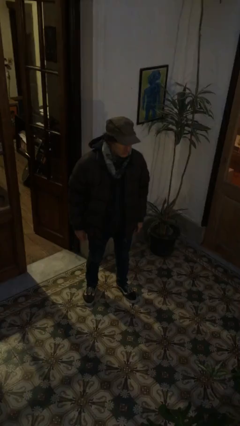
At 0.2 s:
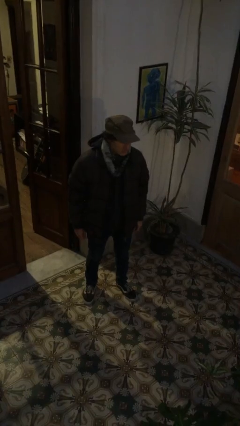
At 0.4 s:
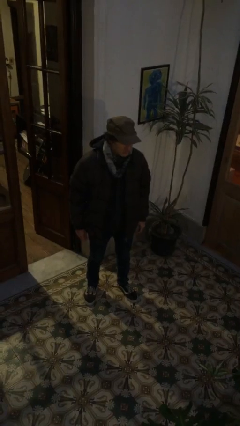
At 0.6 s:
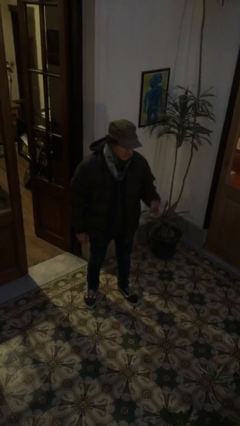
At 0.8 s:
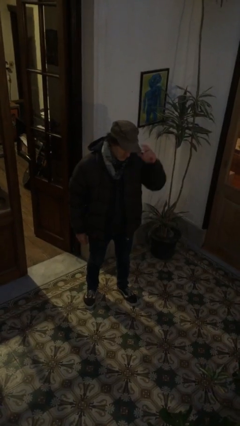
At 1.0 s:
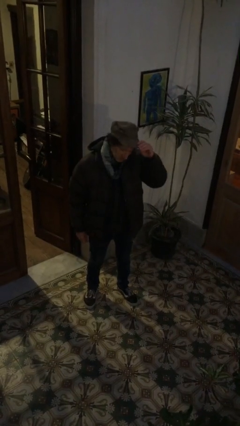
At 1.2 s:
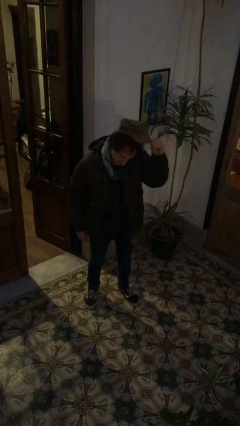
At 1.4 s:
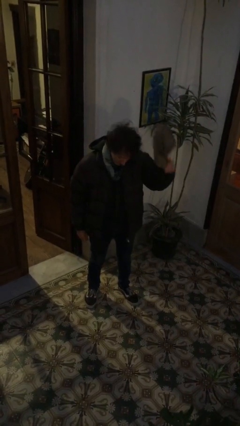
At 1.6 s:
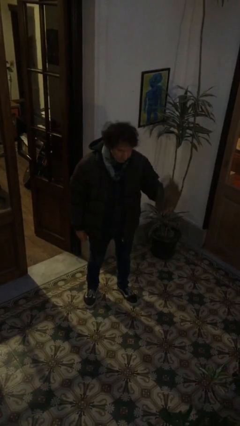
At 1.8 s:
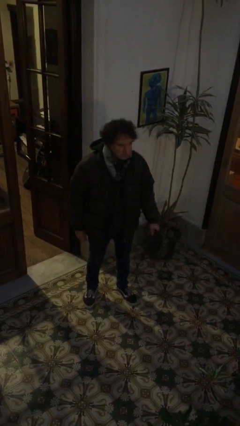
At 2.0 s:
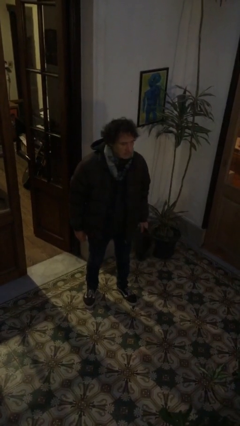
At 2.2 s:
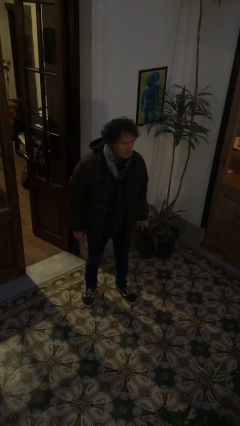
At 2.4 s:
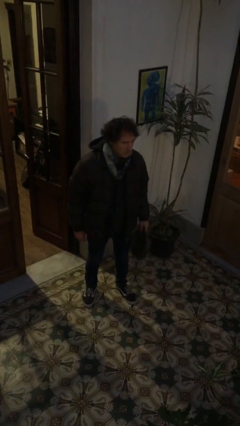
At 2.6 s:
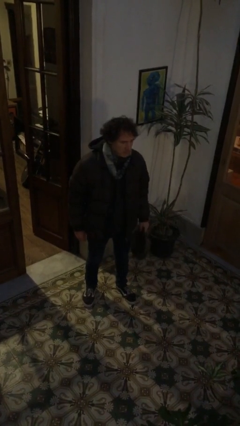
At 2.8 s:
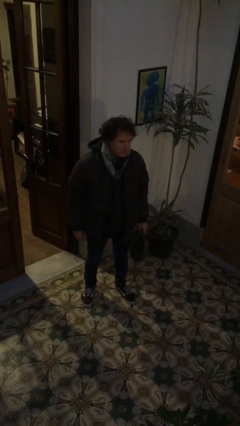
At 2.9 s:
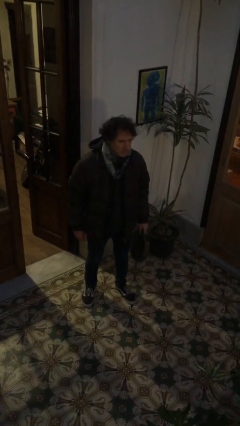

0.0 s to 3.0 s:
person takes off hat

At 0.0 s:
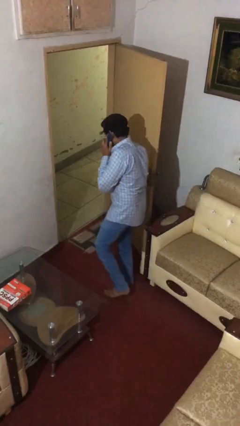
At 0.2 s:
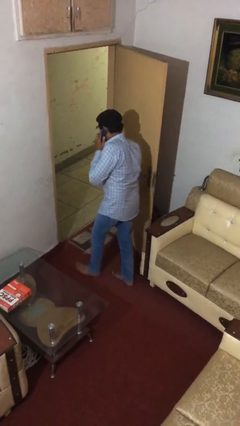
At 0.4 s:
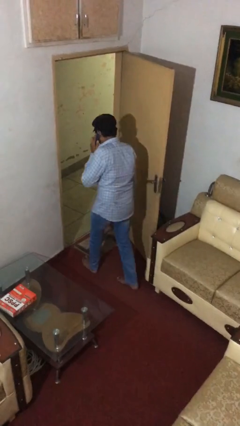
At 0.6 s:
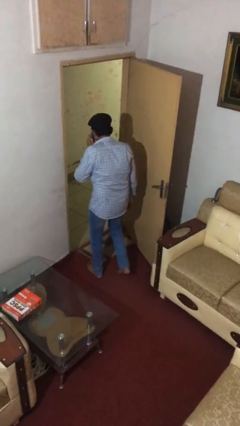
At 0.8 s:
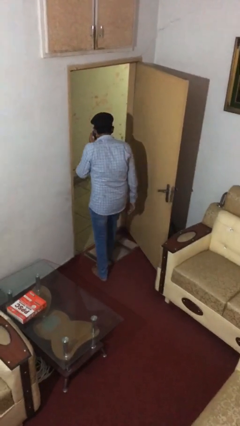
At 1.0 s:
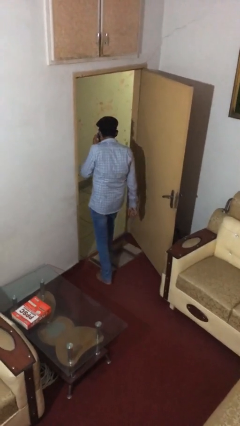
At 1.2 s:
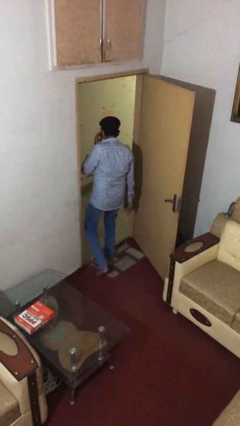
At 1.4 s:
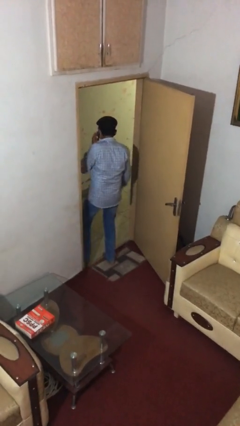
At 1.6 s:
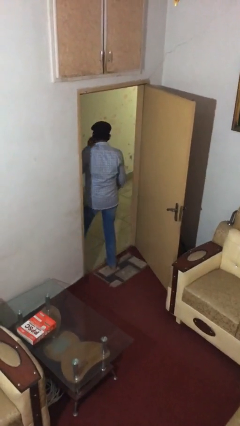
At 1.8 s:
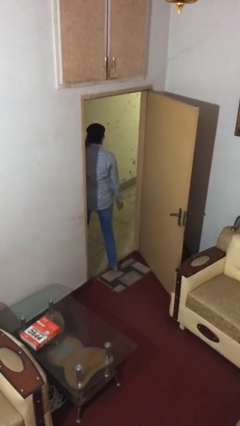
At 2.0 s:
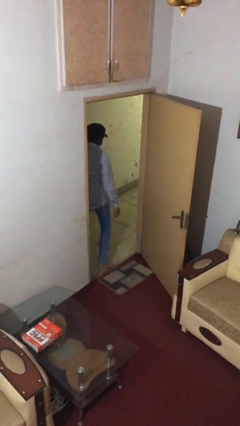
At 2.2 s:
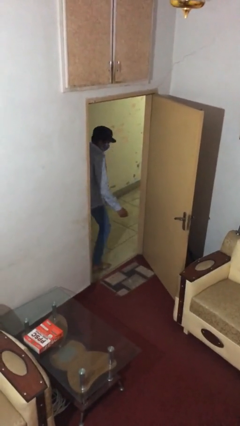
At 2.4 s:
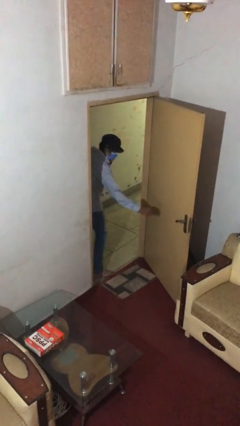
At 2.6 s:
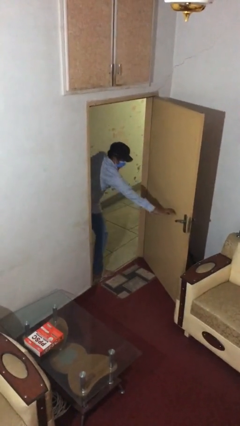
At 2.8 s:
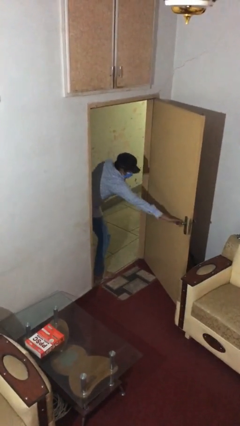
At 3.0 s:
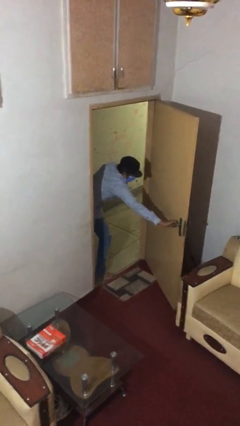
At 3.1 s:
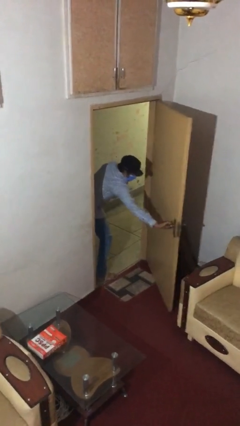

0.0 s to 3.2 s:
person exits scene through structure

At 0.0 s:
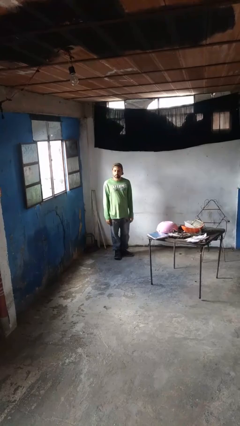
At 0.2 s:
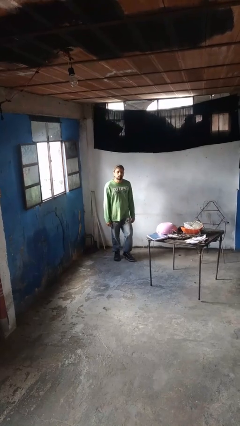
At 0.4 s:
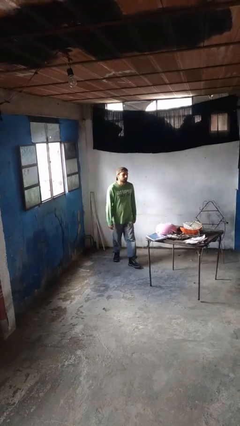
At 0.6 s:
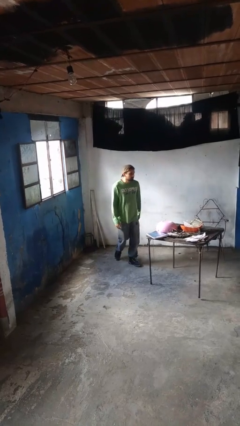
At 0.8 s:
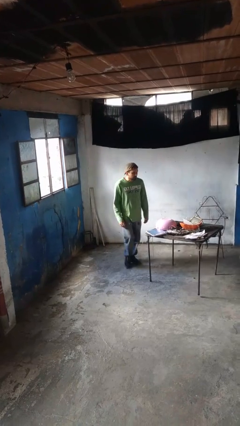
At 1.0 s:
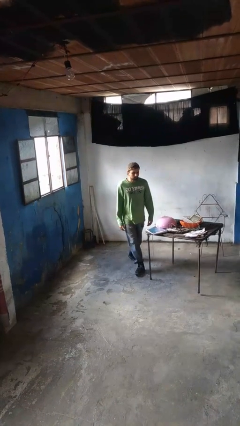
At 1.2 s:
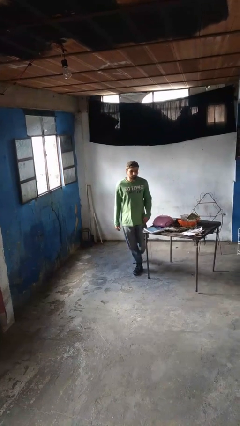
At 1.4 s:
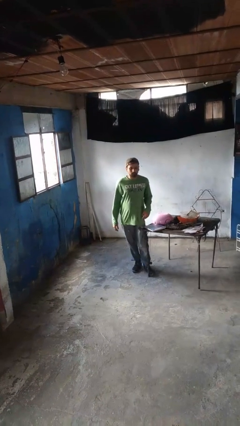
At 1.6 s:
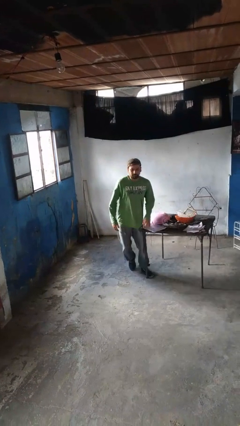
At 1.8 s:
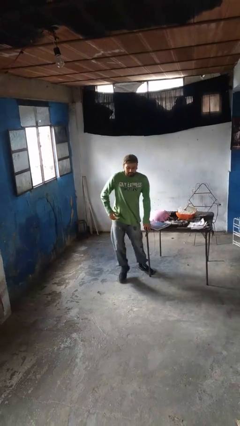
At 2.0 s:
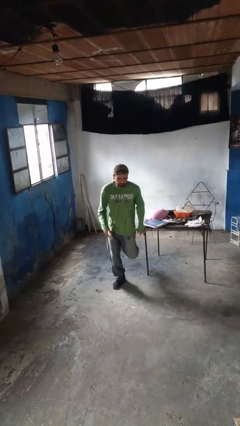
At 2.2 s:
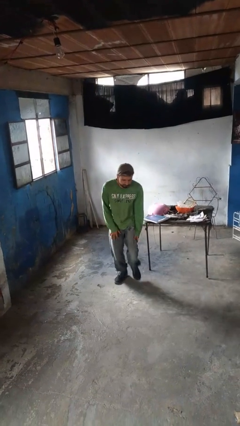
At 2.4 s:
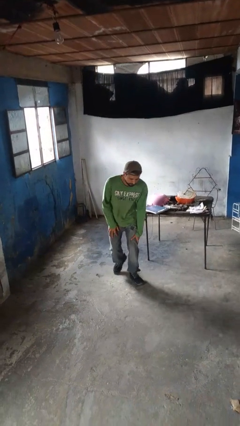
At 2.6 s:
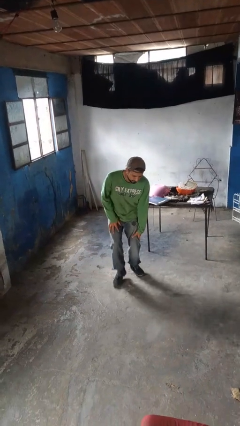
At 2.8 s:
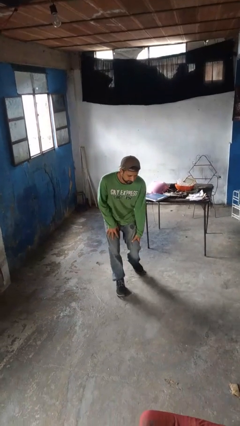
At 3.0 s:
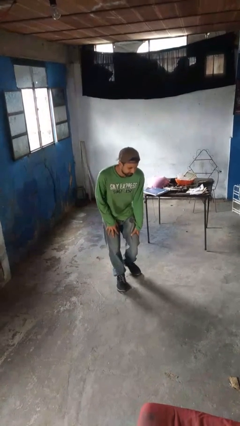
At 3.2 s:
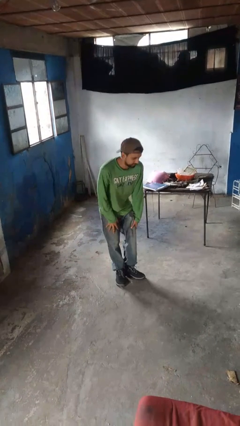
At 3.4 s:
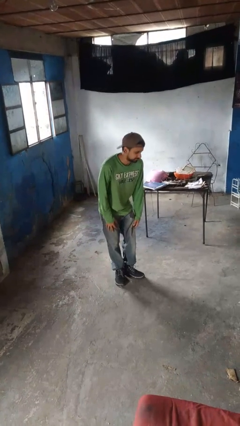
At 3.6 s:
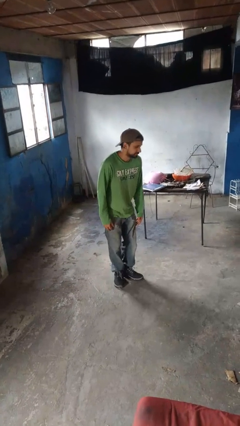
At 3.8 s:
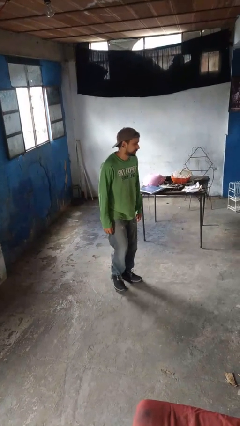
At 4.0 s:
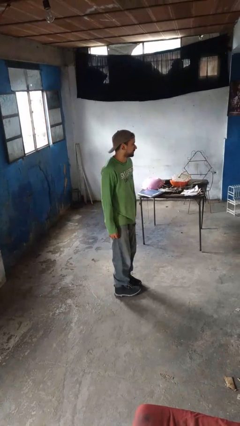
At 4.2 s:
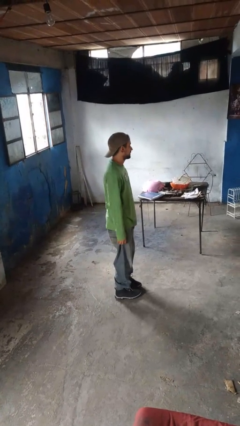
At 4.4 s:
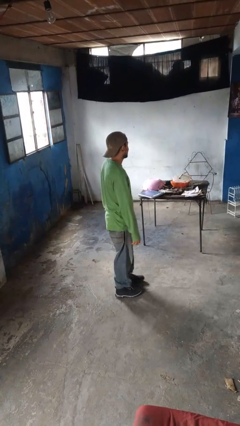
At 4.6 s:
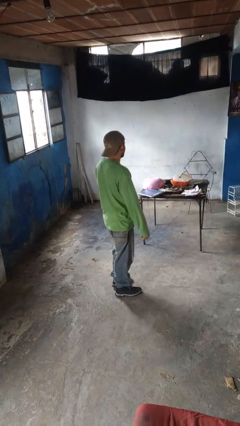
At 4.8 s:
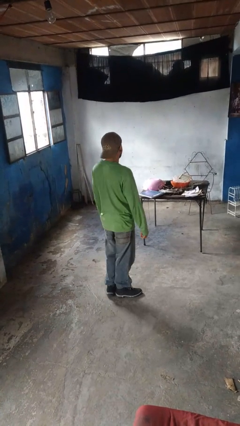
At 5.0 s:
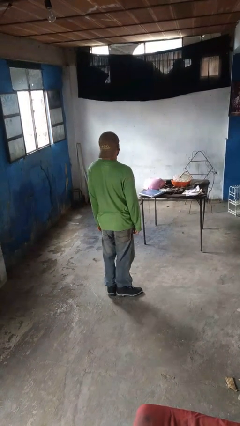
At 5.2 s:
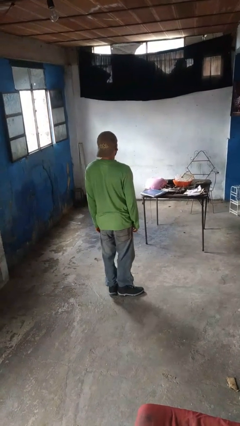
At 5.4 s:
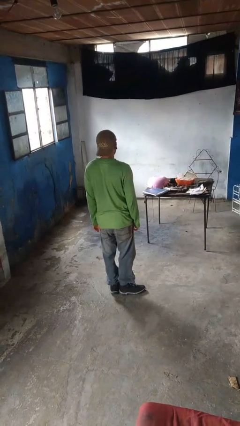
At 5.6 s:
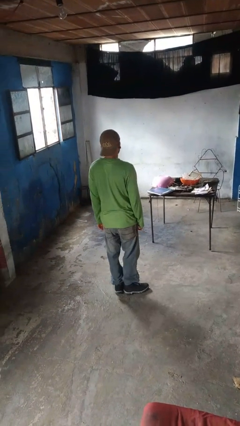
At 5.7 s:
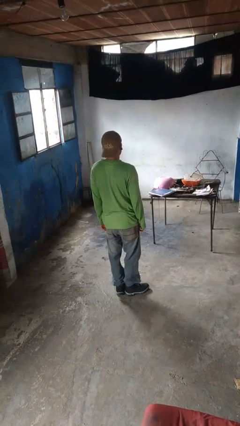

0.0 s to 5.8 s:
person bumps into table

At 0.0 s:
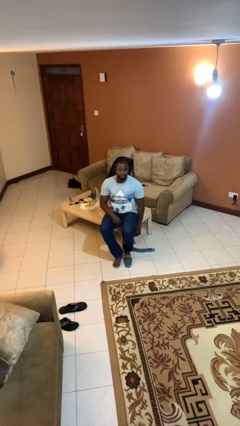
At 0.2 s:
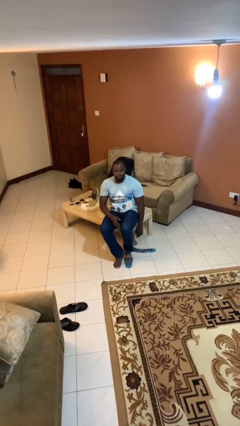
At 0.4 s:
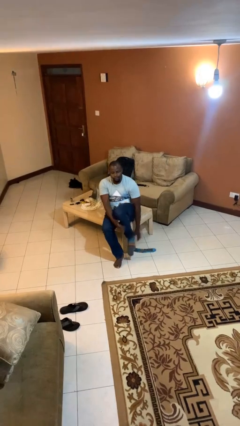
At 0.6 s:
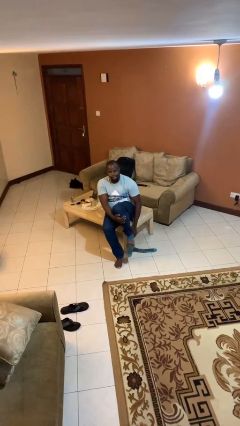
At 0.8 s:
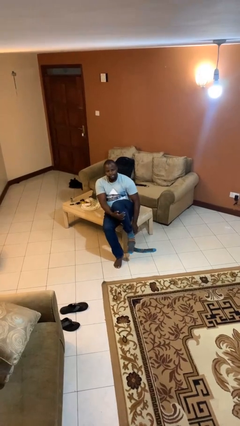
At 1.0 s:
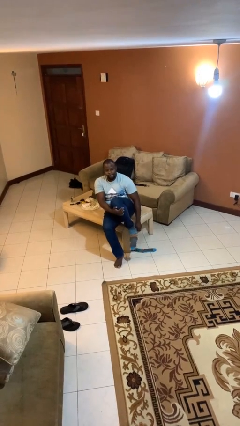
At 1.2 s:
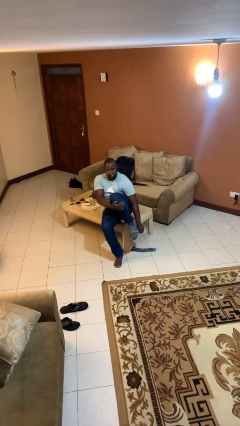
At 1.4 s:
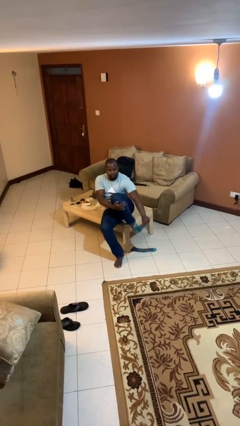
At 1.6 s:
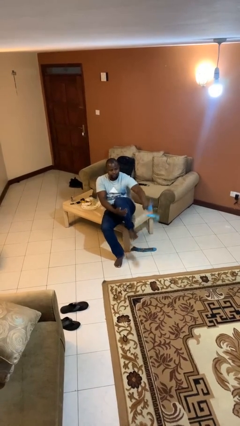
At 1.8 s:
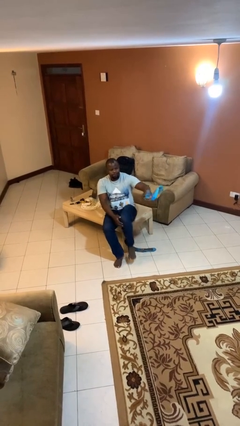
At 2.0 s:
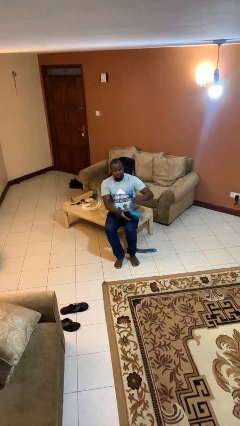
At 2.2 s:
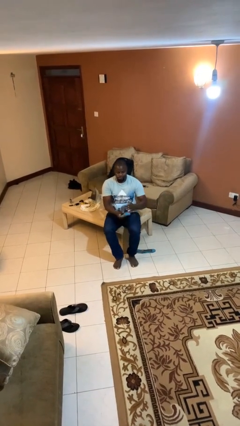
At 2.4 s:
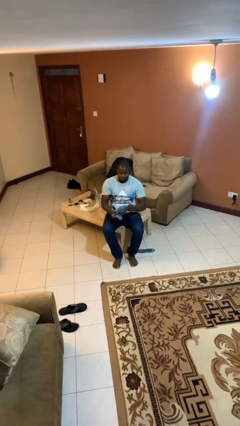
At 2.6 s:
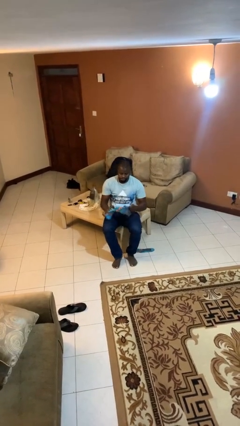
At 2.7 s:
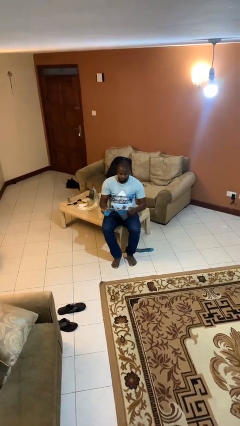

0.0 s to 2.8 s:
person takes off socks

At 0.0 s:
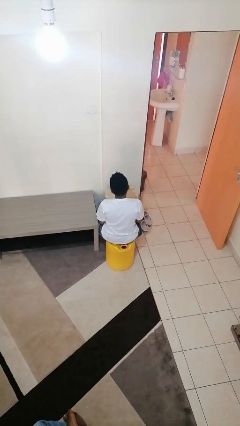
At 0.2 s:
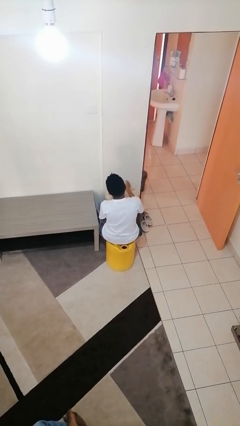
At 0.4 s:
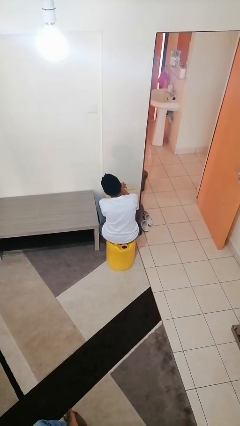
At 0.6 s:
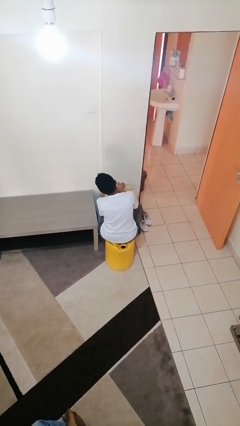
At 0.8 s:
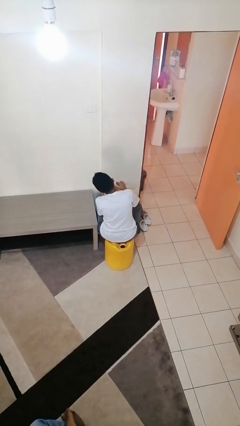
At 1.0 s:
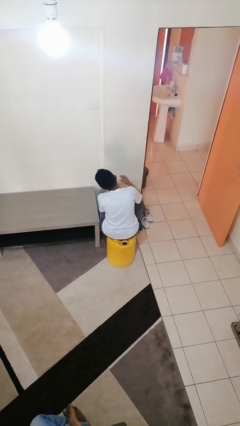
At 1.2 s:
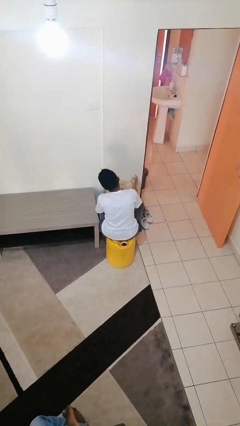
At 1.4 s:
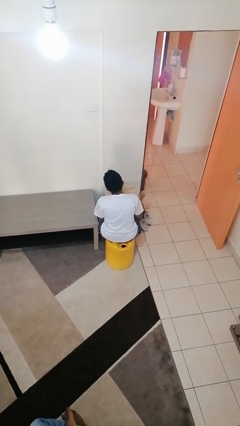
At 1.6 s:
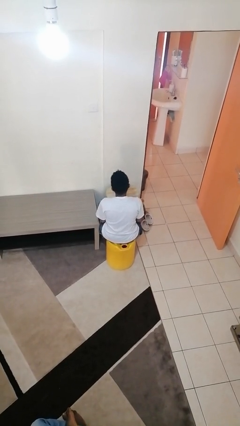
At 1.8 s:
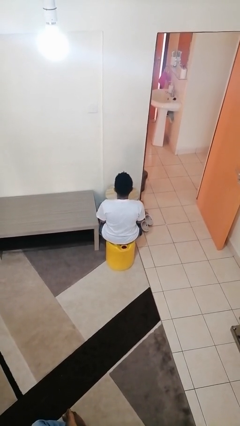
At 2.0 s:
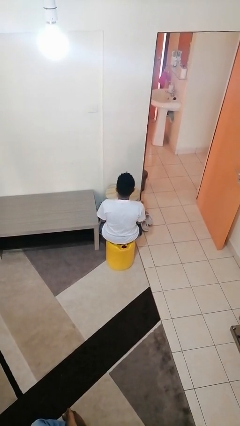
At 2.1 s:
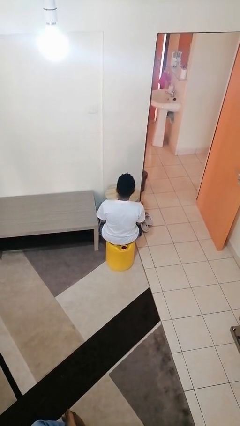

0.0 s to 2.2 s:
person opens jar

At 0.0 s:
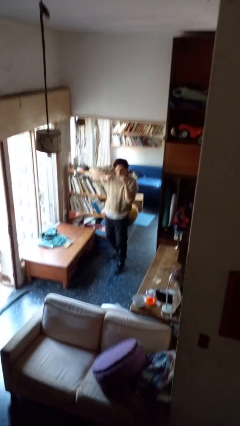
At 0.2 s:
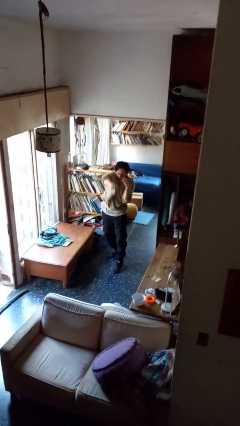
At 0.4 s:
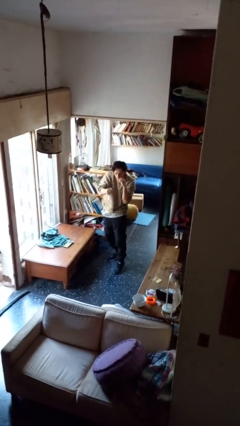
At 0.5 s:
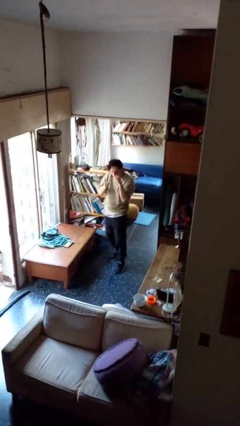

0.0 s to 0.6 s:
person punches
